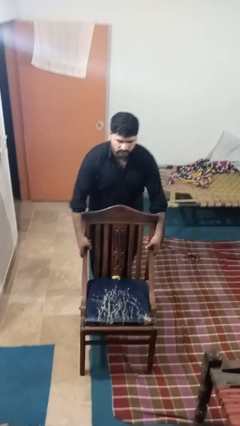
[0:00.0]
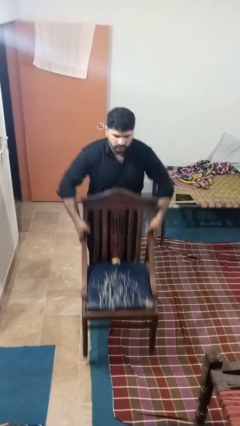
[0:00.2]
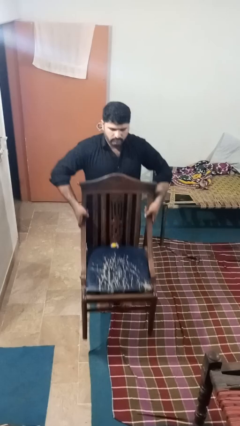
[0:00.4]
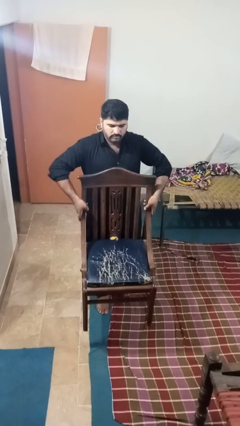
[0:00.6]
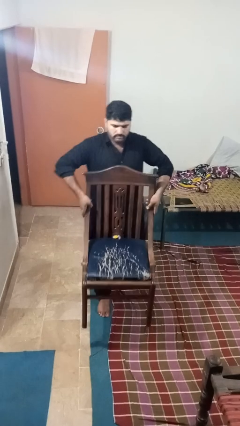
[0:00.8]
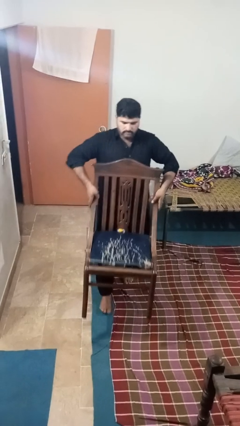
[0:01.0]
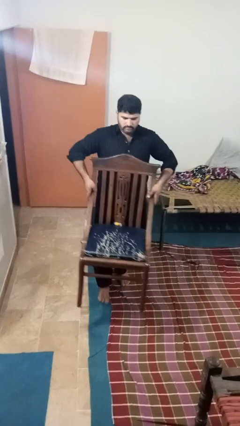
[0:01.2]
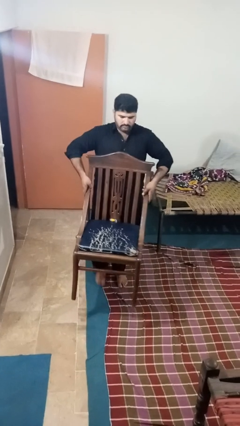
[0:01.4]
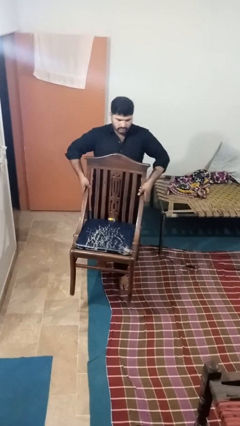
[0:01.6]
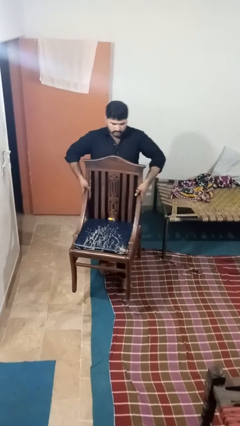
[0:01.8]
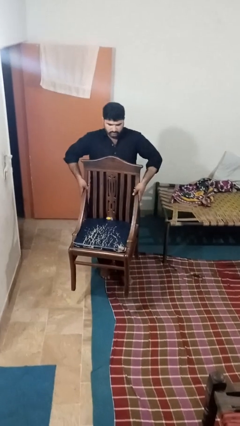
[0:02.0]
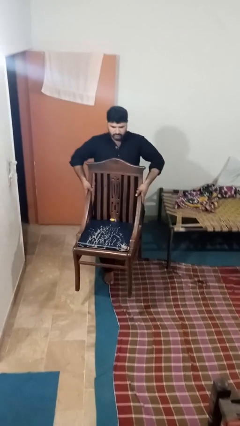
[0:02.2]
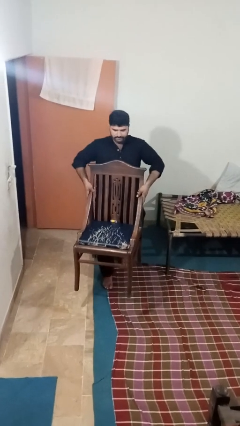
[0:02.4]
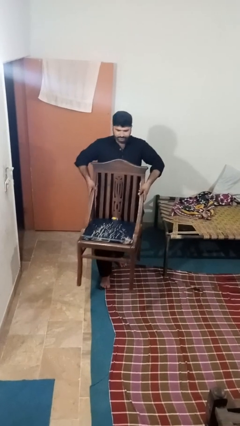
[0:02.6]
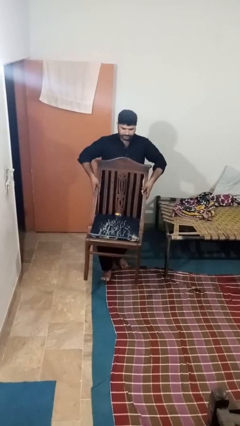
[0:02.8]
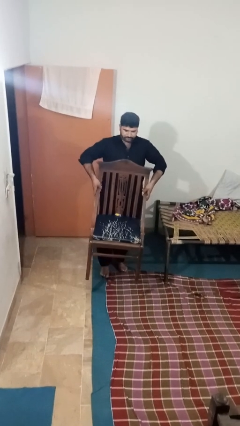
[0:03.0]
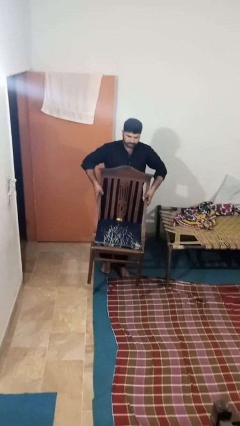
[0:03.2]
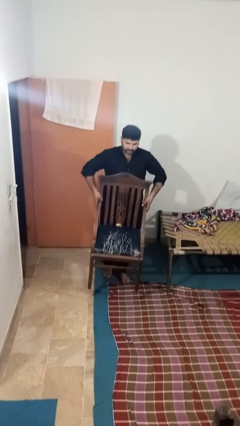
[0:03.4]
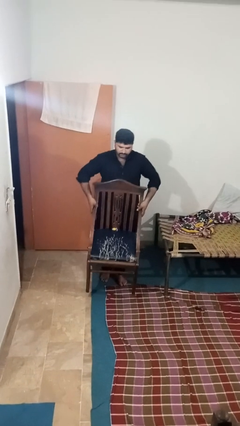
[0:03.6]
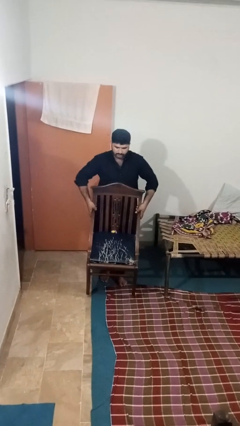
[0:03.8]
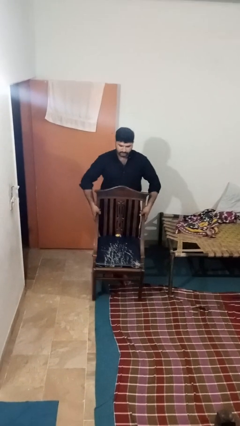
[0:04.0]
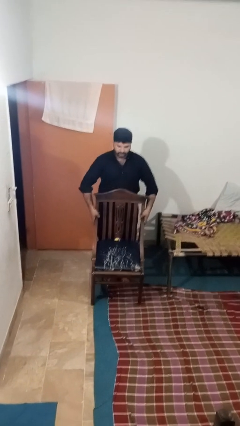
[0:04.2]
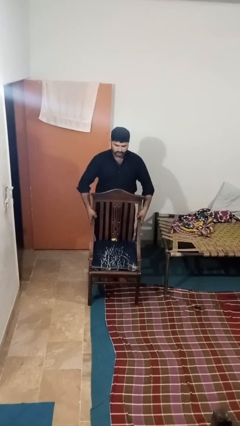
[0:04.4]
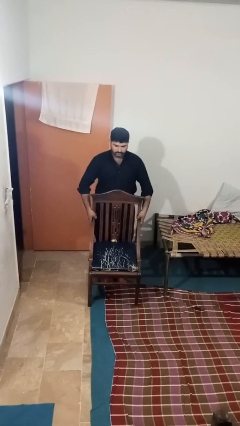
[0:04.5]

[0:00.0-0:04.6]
person carries furniture

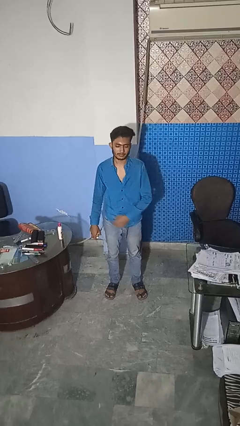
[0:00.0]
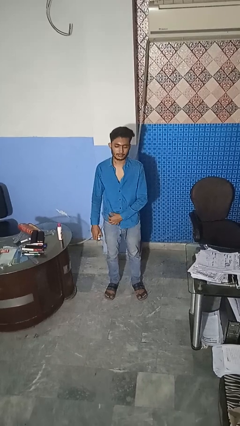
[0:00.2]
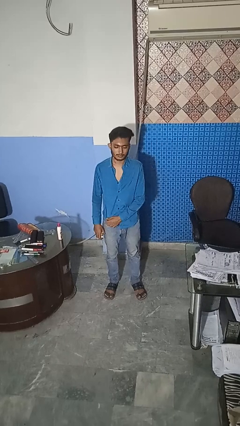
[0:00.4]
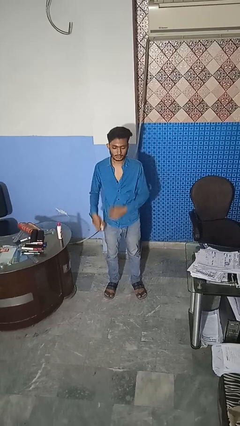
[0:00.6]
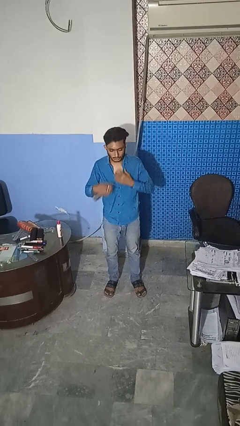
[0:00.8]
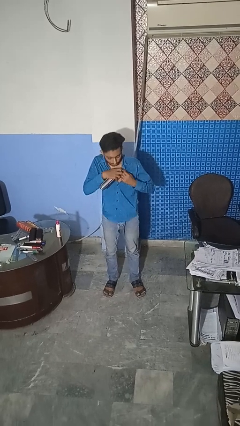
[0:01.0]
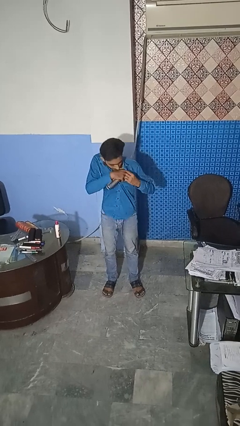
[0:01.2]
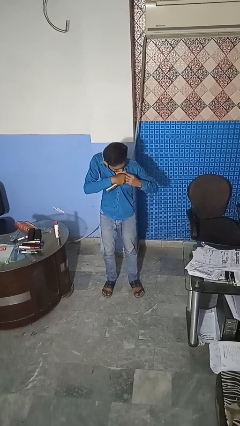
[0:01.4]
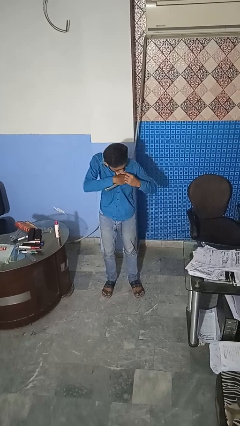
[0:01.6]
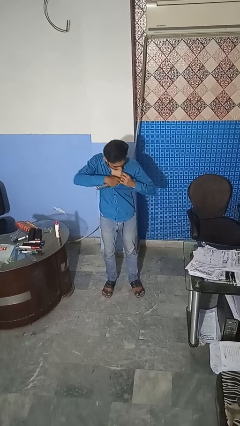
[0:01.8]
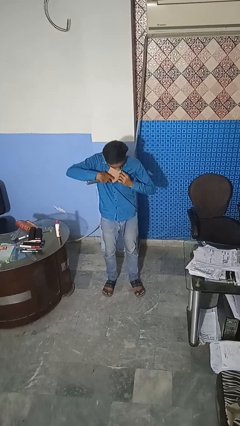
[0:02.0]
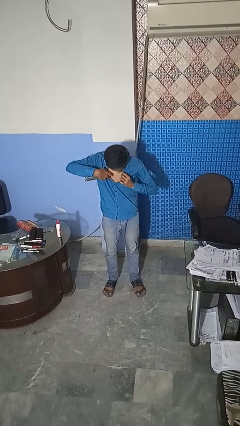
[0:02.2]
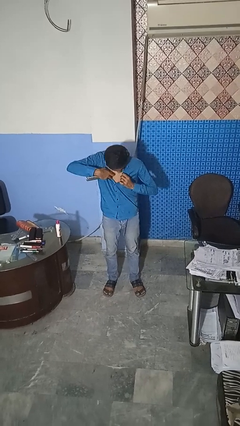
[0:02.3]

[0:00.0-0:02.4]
person applies deodorant

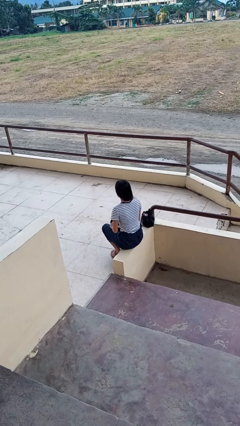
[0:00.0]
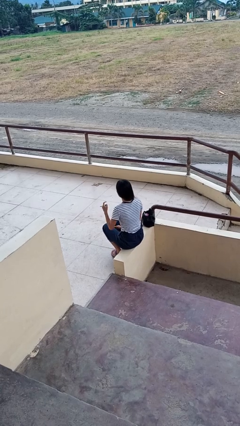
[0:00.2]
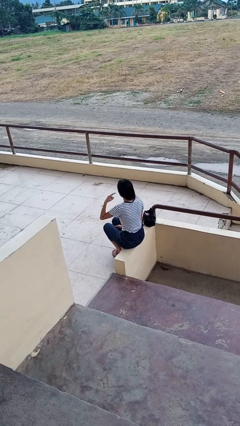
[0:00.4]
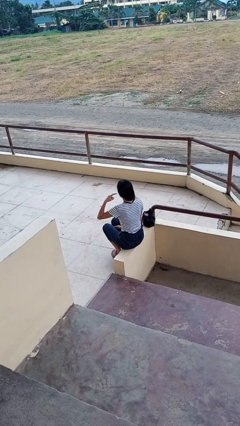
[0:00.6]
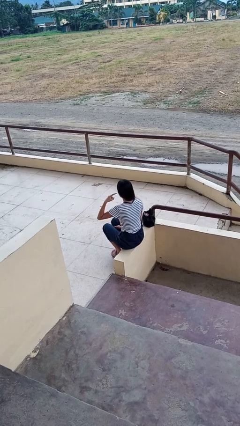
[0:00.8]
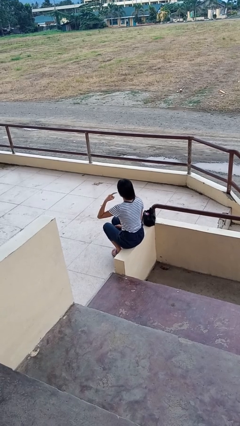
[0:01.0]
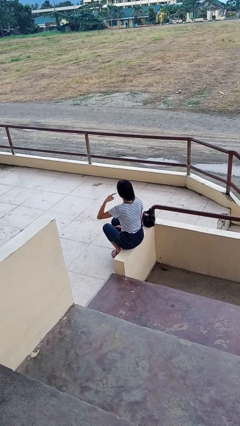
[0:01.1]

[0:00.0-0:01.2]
person gestures listen closely

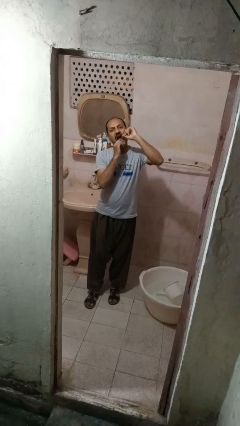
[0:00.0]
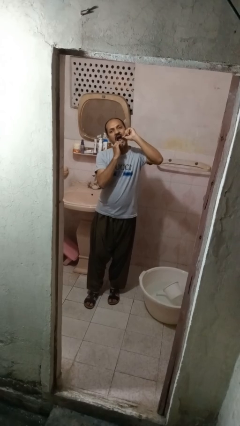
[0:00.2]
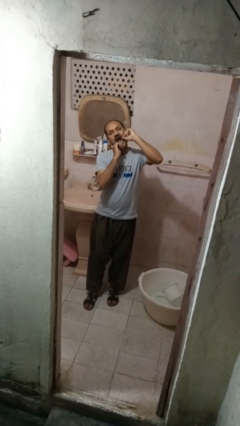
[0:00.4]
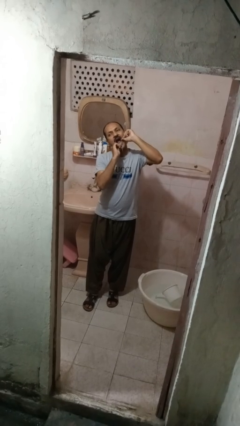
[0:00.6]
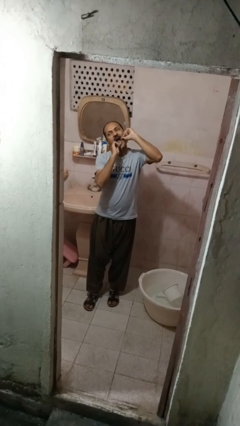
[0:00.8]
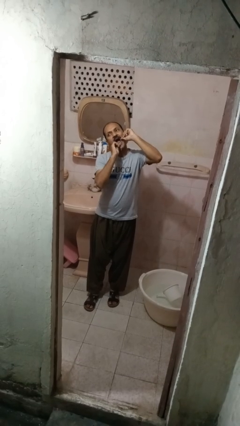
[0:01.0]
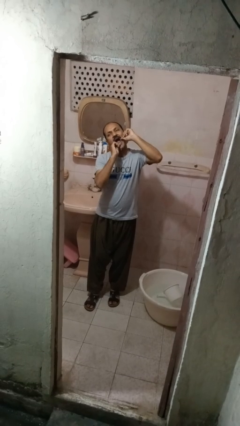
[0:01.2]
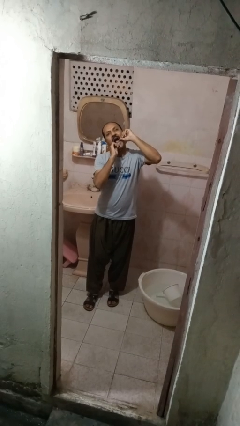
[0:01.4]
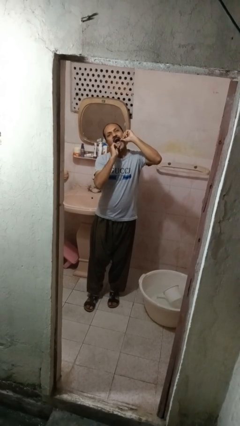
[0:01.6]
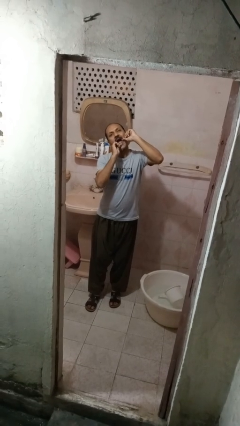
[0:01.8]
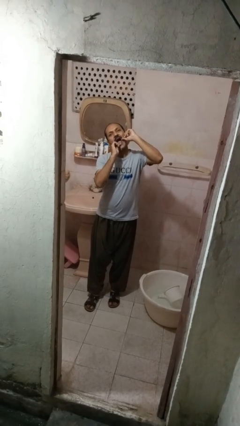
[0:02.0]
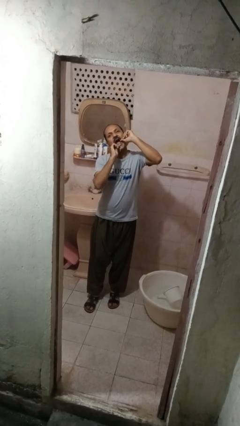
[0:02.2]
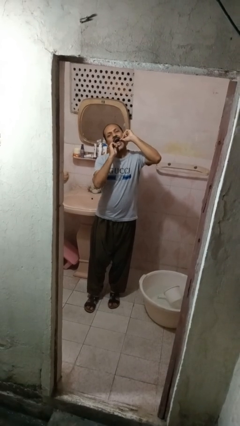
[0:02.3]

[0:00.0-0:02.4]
person flosses

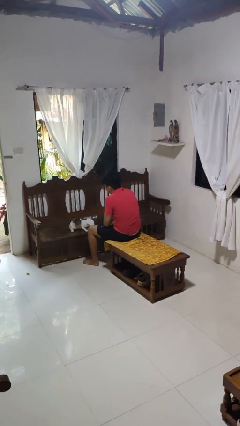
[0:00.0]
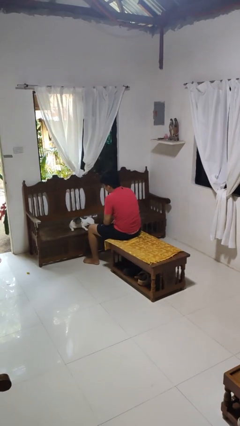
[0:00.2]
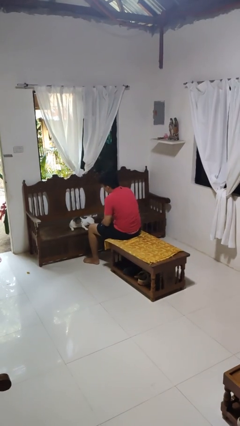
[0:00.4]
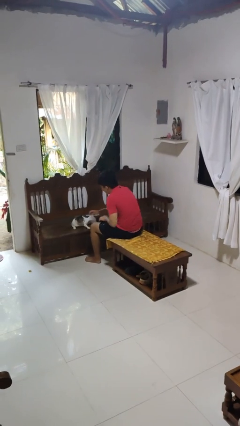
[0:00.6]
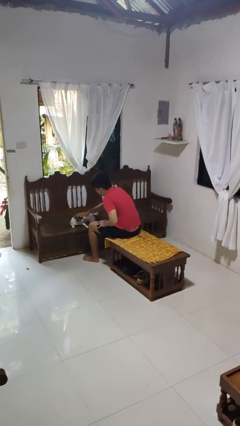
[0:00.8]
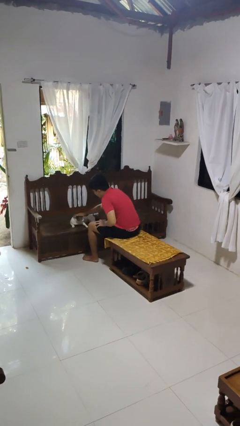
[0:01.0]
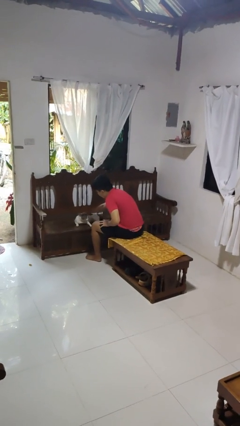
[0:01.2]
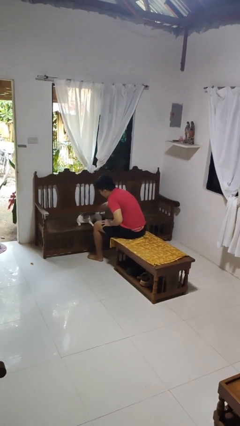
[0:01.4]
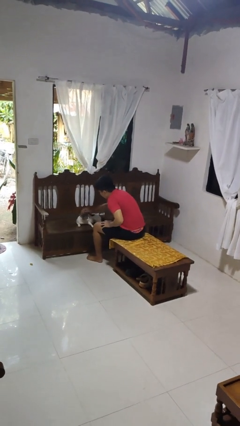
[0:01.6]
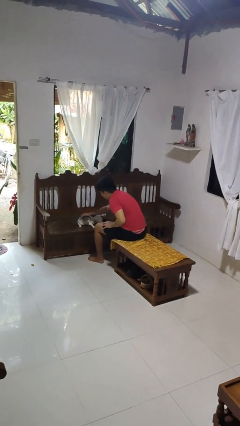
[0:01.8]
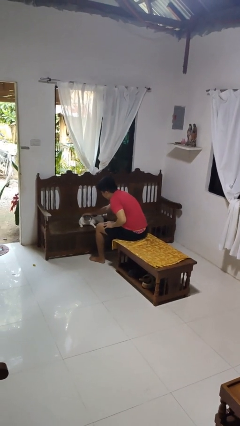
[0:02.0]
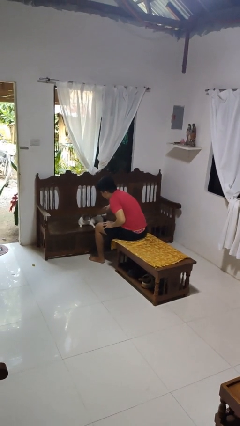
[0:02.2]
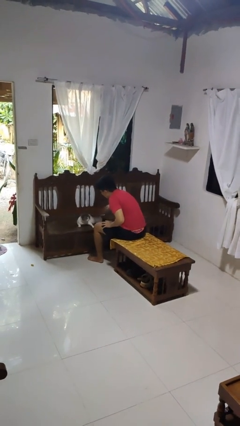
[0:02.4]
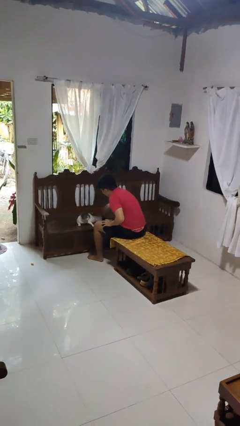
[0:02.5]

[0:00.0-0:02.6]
person pets cat

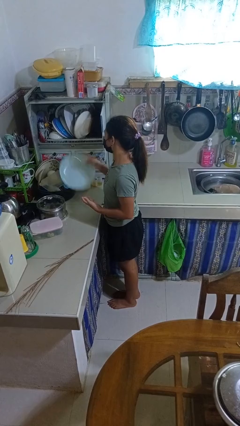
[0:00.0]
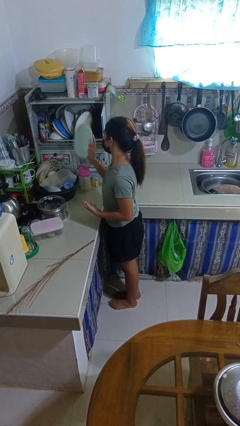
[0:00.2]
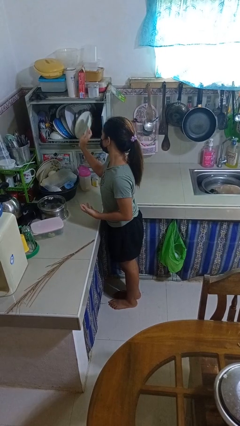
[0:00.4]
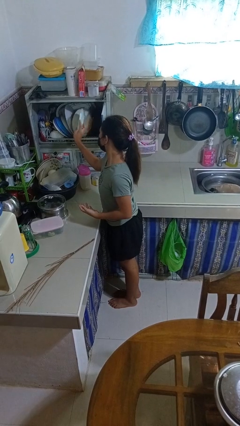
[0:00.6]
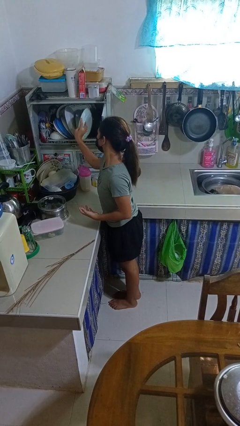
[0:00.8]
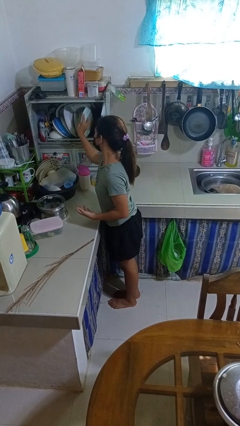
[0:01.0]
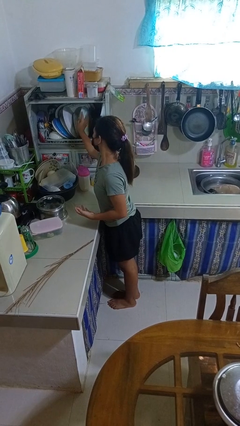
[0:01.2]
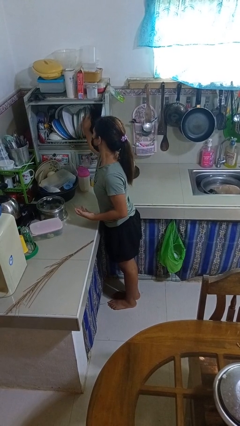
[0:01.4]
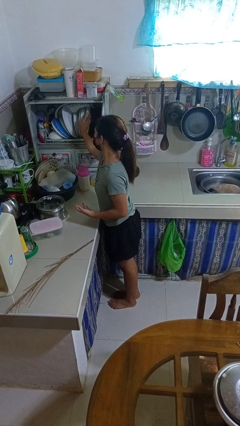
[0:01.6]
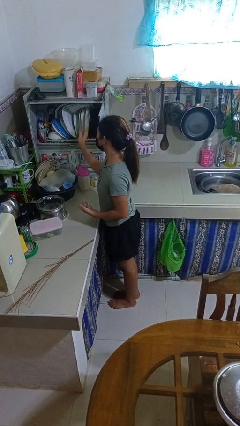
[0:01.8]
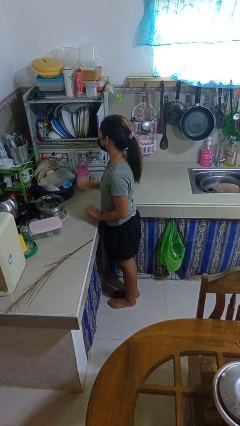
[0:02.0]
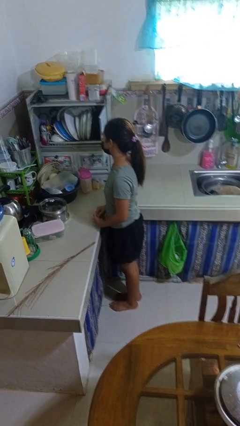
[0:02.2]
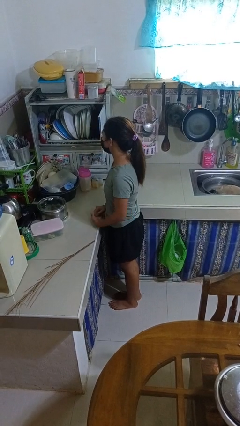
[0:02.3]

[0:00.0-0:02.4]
person puts object into kitchen drawer

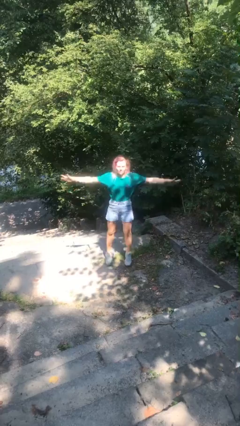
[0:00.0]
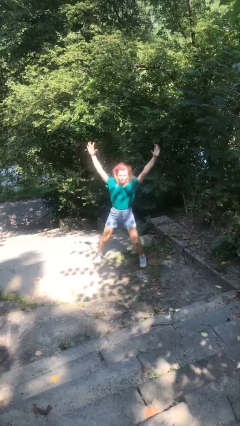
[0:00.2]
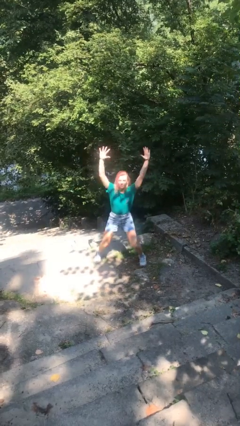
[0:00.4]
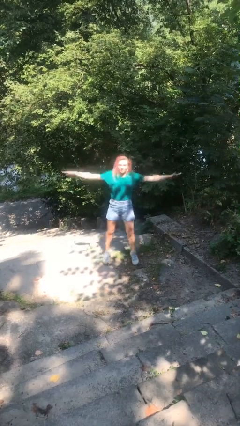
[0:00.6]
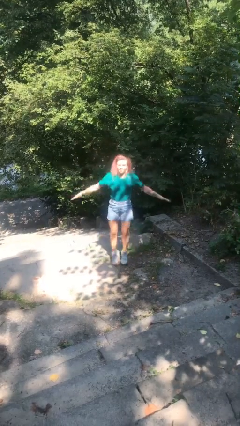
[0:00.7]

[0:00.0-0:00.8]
person exercises with jumping jacks

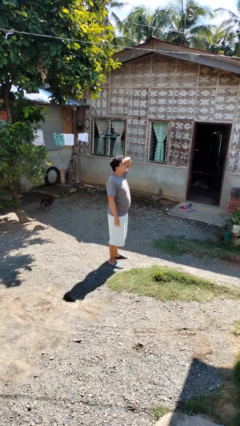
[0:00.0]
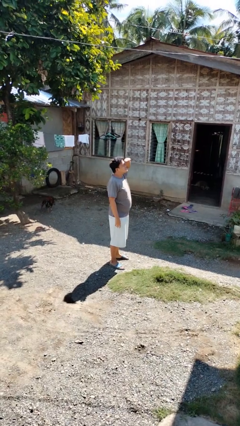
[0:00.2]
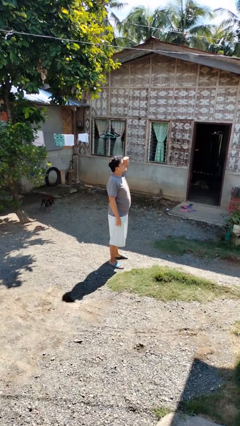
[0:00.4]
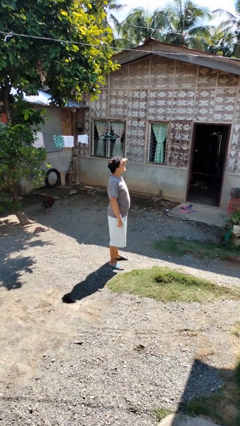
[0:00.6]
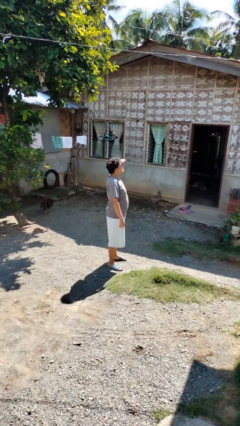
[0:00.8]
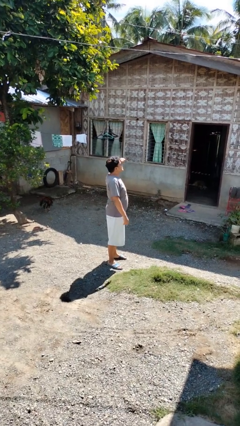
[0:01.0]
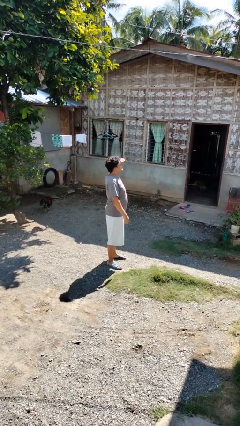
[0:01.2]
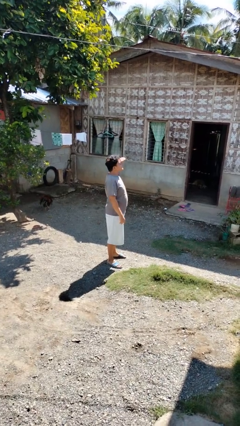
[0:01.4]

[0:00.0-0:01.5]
person shades eyes
